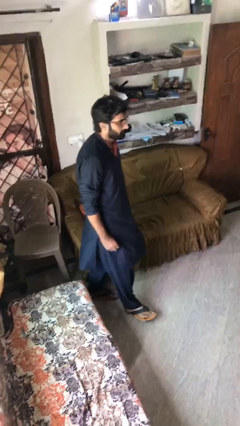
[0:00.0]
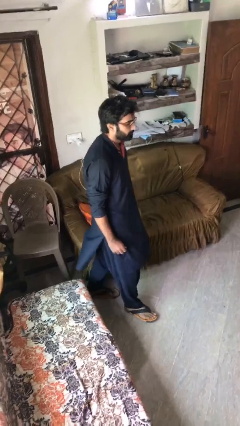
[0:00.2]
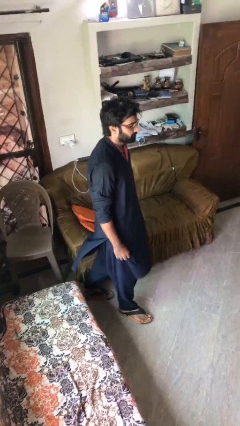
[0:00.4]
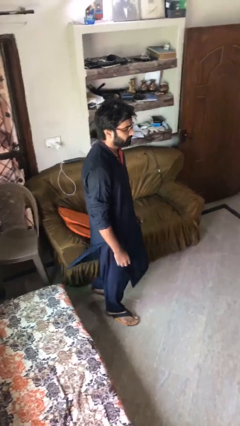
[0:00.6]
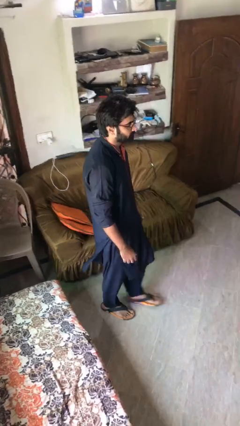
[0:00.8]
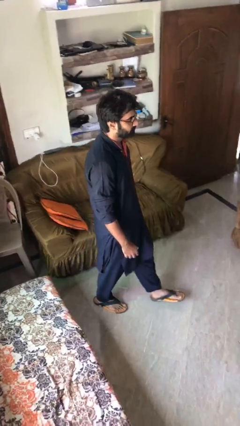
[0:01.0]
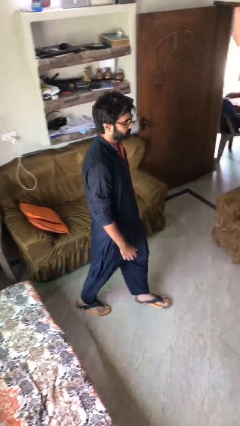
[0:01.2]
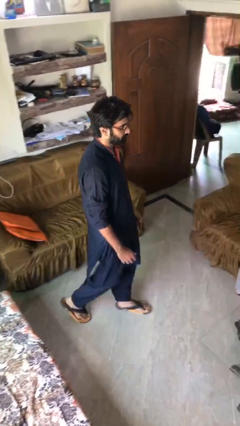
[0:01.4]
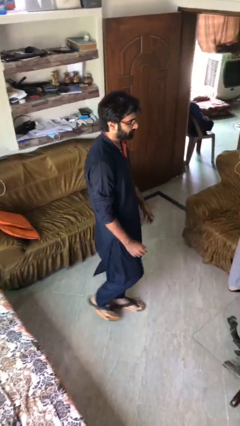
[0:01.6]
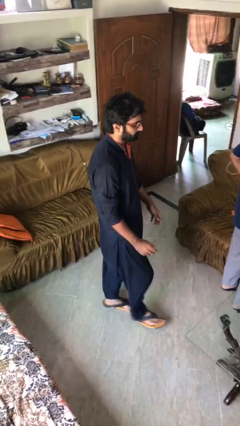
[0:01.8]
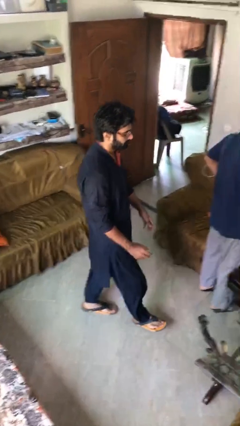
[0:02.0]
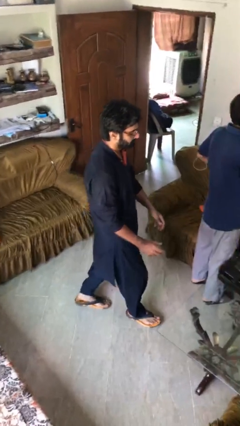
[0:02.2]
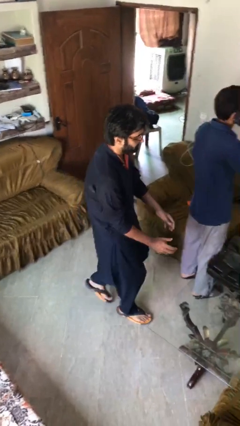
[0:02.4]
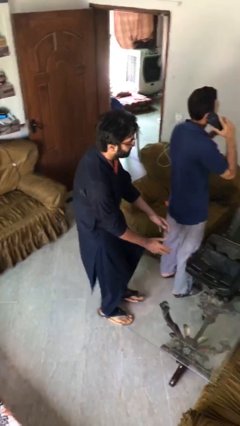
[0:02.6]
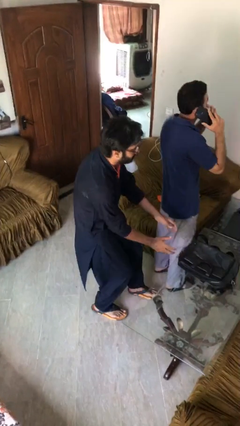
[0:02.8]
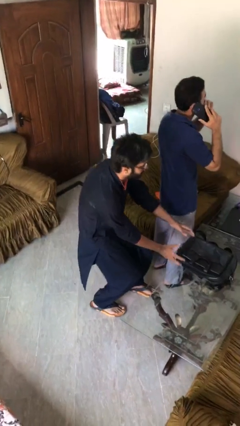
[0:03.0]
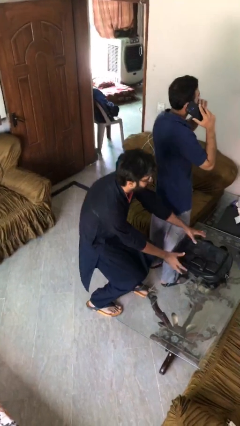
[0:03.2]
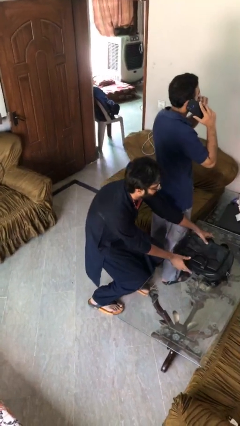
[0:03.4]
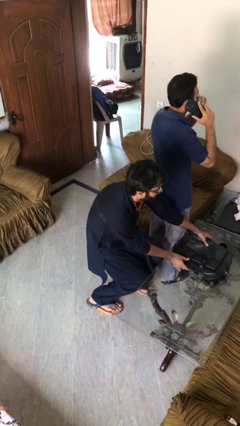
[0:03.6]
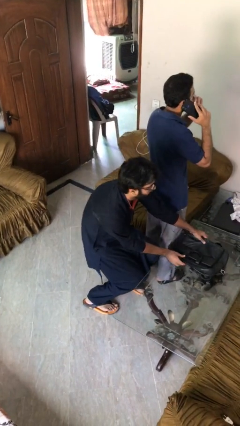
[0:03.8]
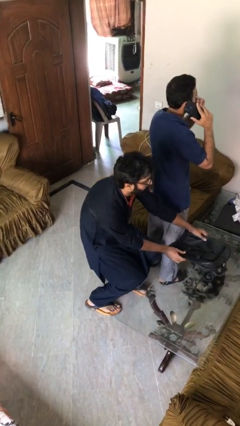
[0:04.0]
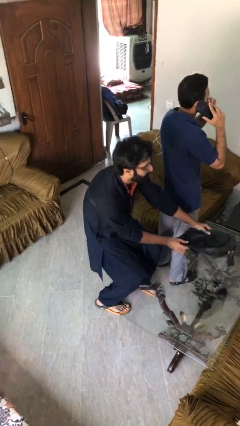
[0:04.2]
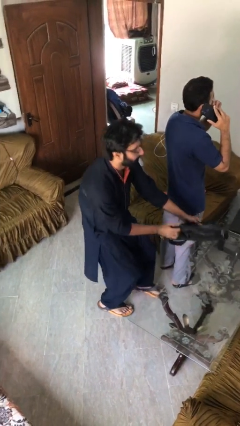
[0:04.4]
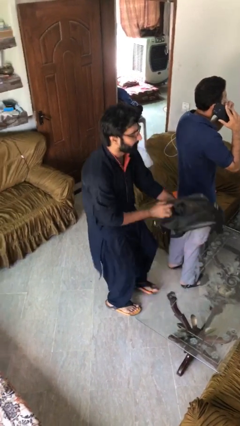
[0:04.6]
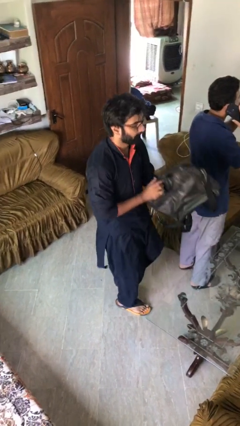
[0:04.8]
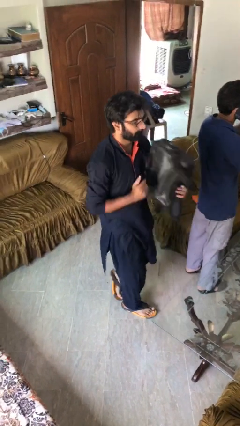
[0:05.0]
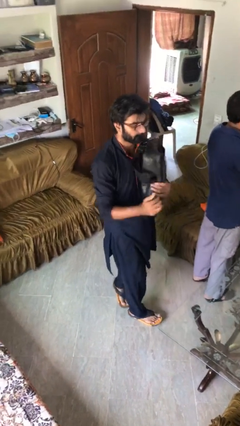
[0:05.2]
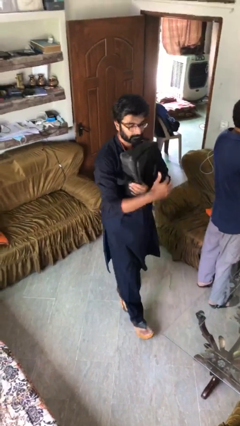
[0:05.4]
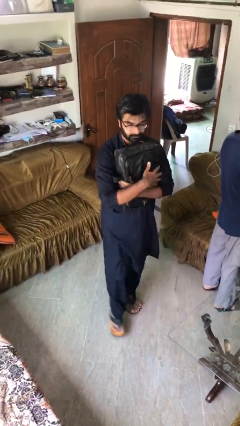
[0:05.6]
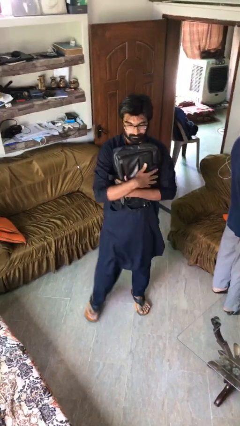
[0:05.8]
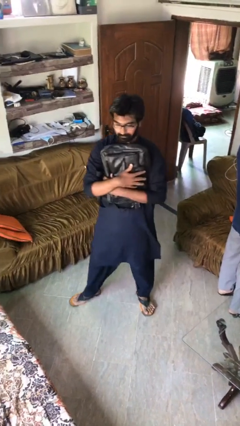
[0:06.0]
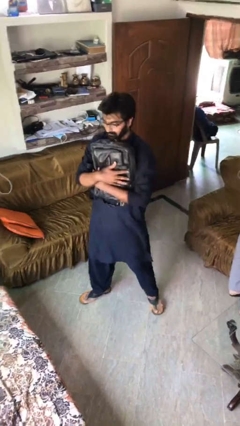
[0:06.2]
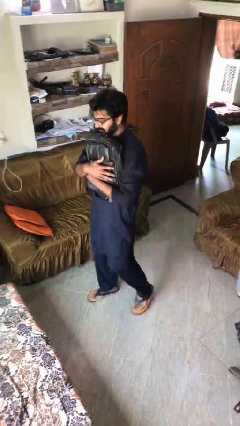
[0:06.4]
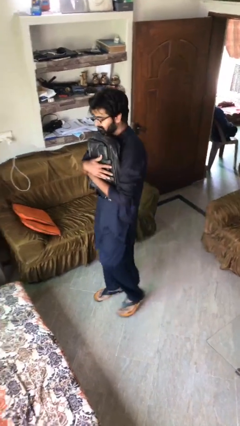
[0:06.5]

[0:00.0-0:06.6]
person steals object from person

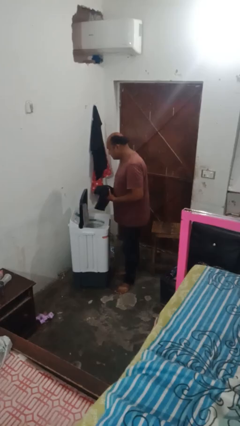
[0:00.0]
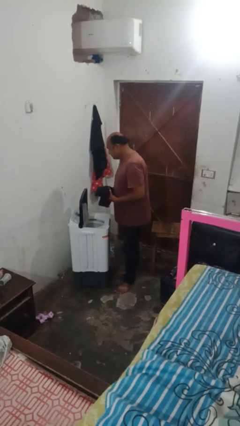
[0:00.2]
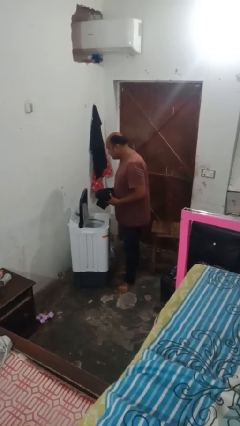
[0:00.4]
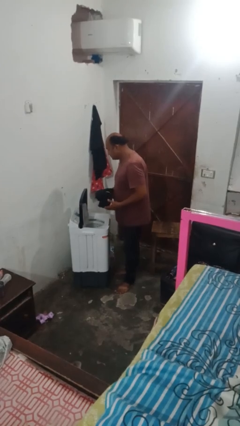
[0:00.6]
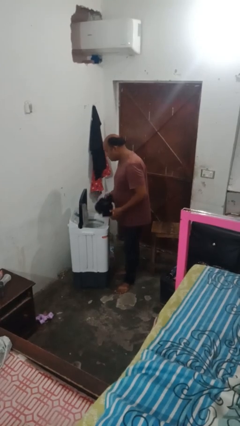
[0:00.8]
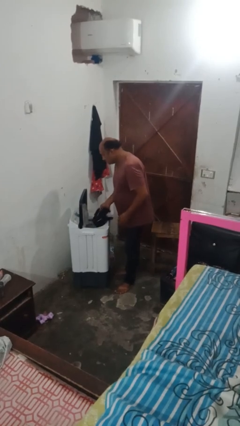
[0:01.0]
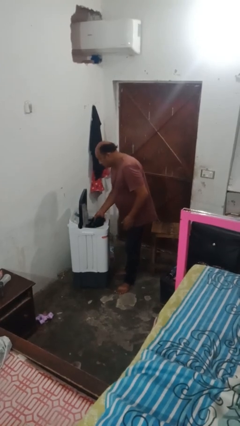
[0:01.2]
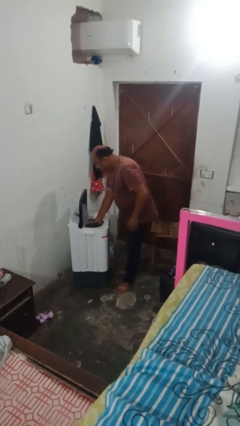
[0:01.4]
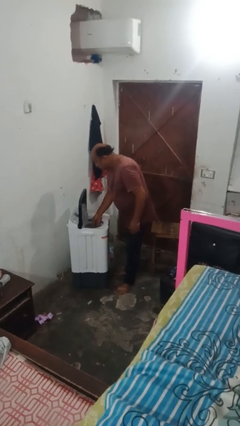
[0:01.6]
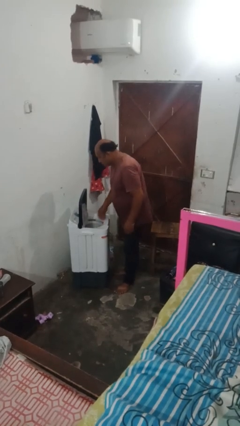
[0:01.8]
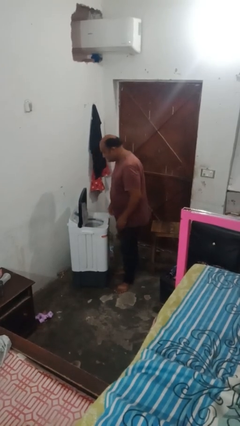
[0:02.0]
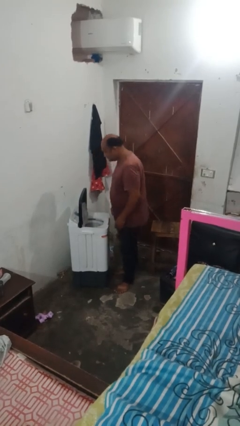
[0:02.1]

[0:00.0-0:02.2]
person loads clotheswasher

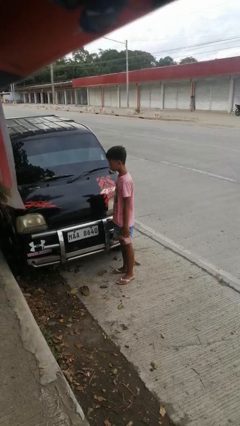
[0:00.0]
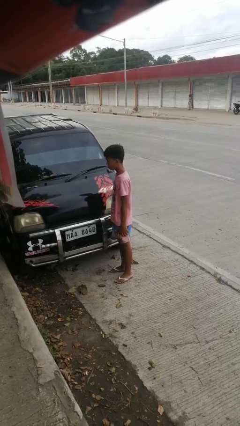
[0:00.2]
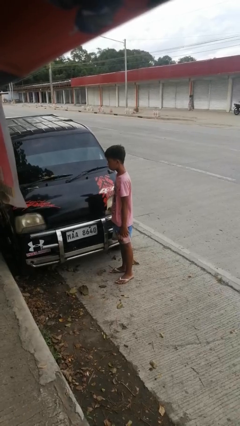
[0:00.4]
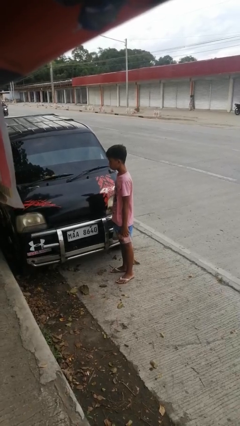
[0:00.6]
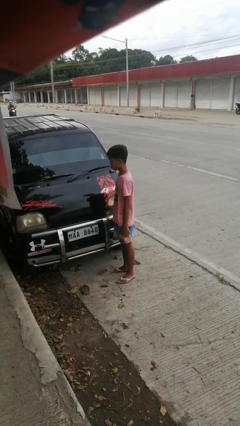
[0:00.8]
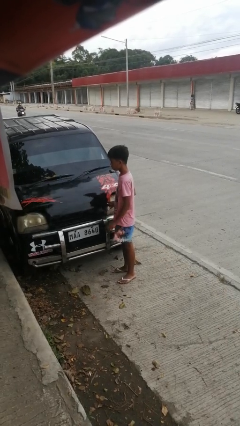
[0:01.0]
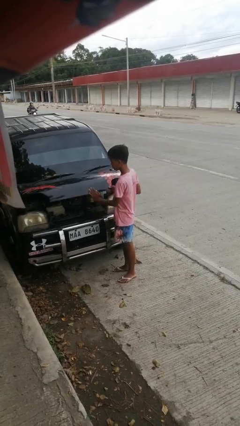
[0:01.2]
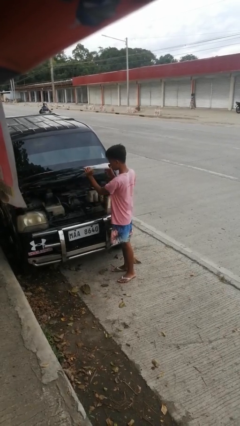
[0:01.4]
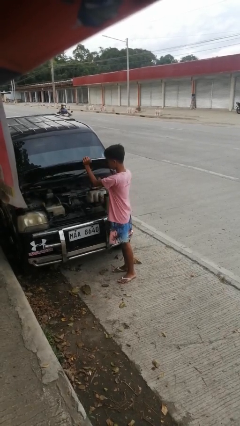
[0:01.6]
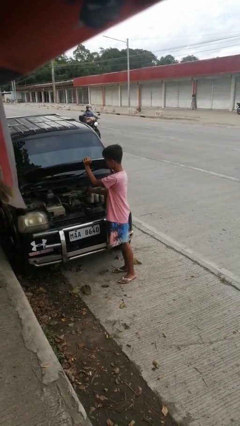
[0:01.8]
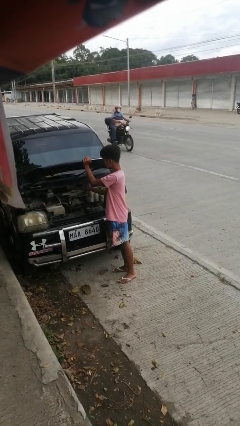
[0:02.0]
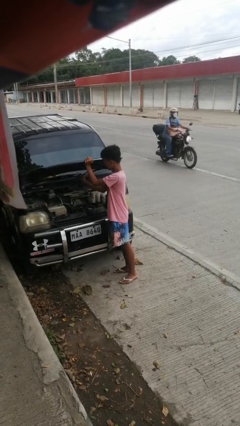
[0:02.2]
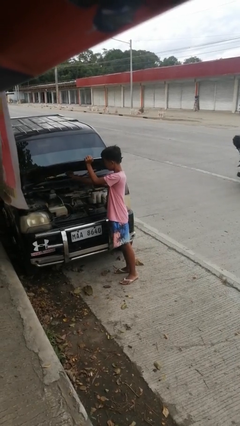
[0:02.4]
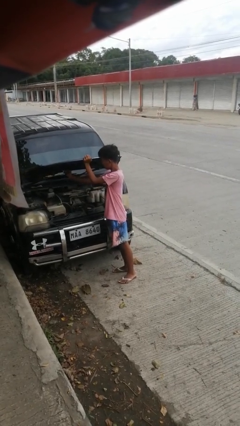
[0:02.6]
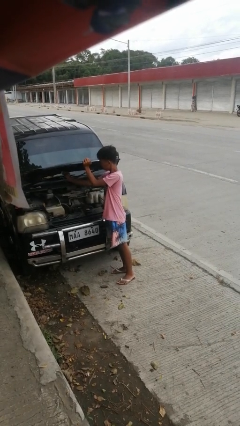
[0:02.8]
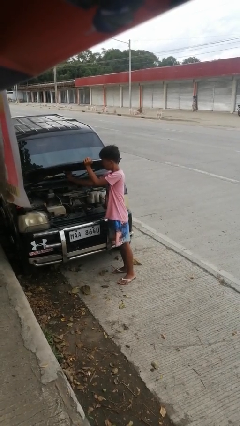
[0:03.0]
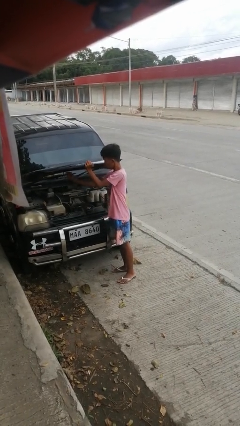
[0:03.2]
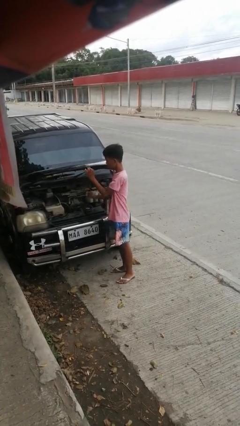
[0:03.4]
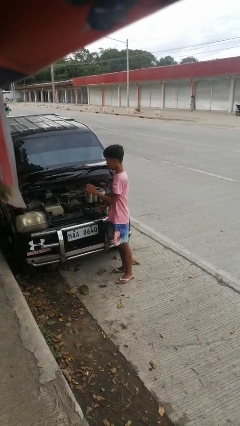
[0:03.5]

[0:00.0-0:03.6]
person opens car hood

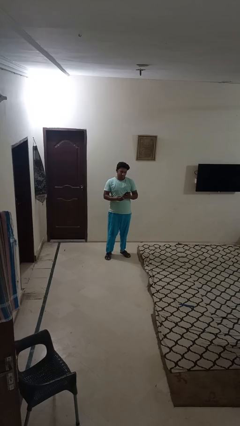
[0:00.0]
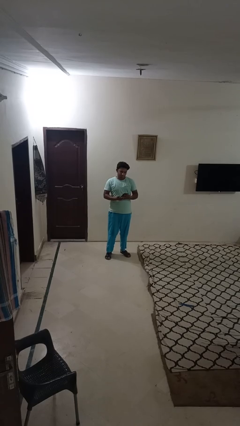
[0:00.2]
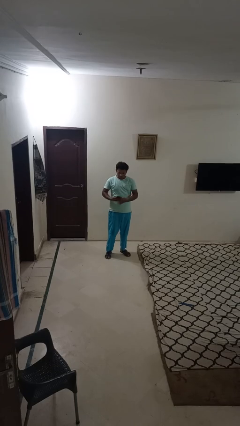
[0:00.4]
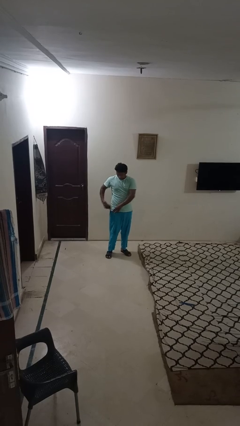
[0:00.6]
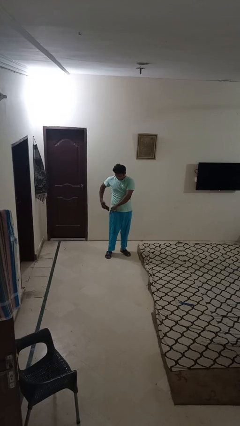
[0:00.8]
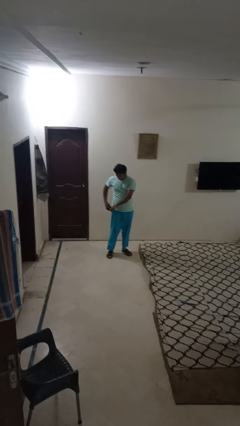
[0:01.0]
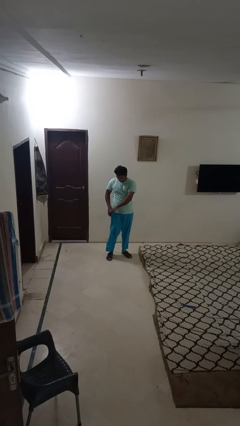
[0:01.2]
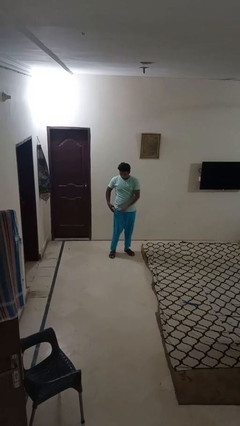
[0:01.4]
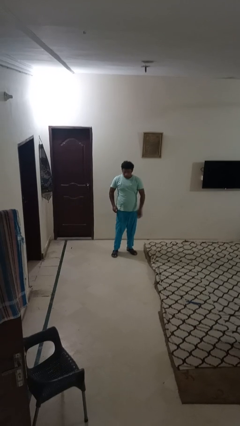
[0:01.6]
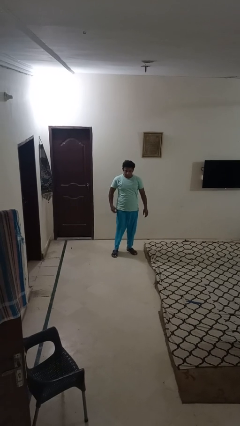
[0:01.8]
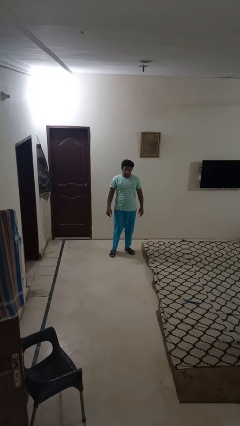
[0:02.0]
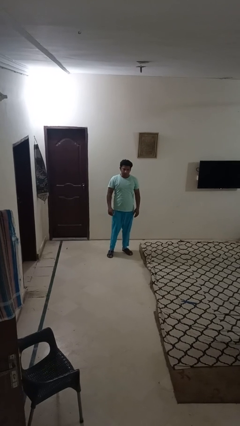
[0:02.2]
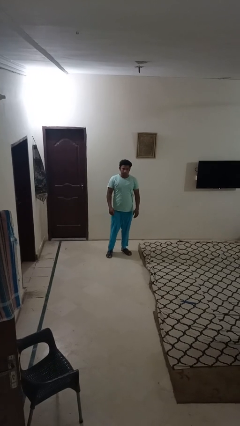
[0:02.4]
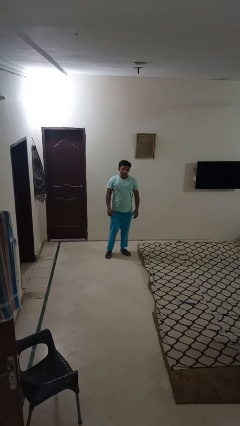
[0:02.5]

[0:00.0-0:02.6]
person puts phone into pocket

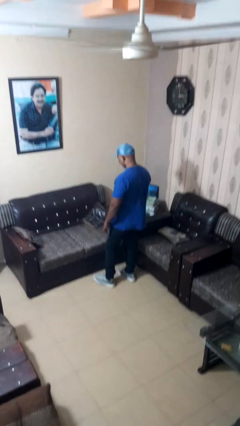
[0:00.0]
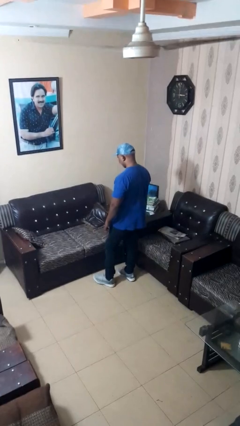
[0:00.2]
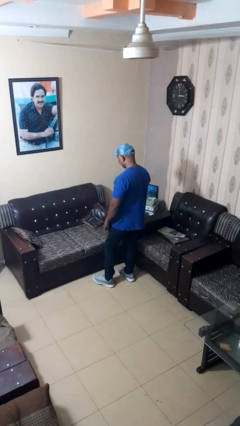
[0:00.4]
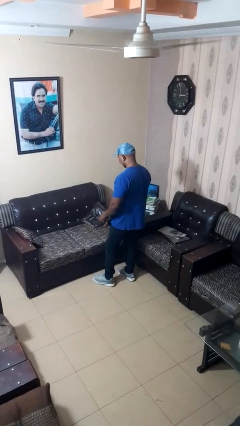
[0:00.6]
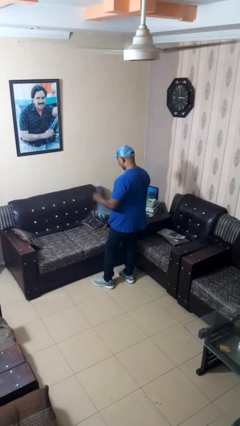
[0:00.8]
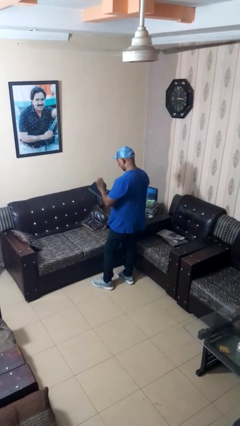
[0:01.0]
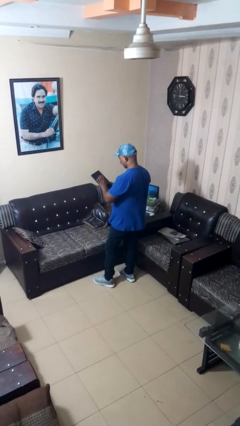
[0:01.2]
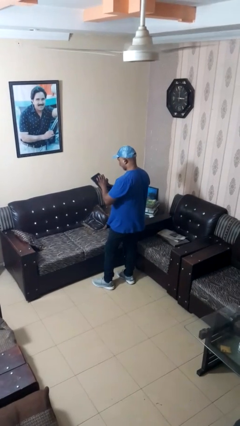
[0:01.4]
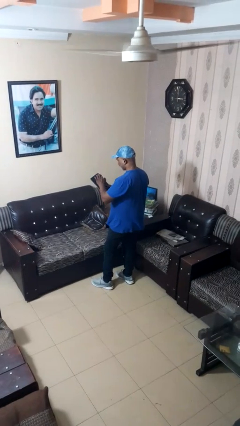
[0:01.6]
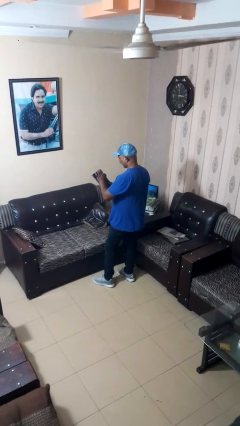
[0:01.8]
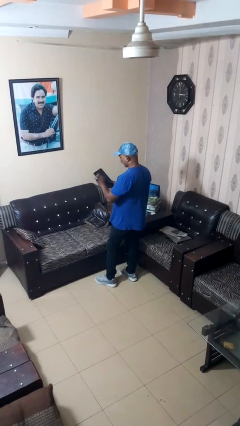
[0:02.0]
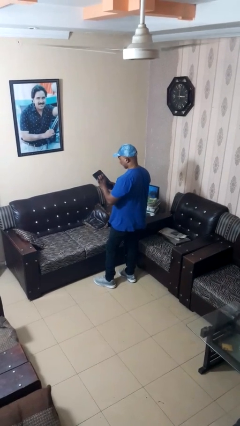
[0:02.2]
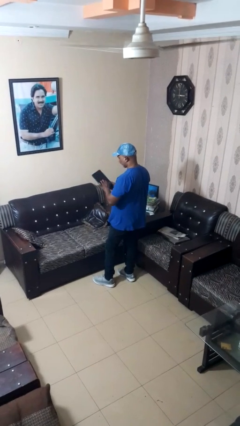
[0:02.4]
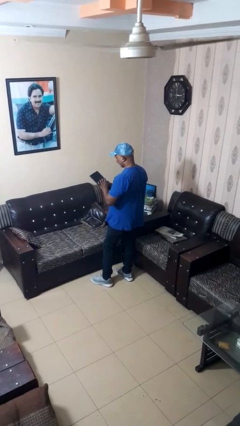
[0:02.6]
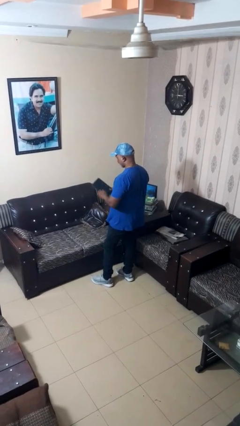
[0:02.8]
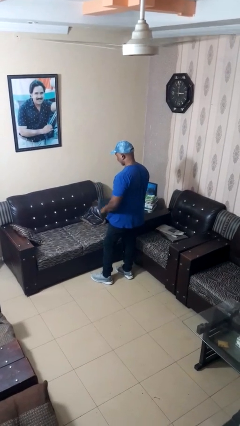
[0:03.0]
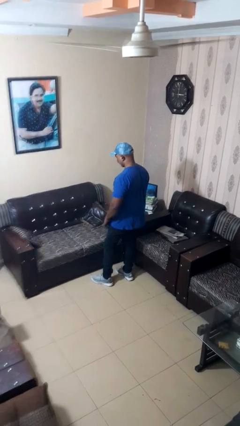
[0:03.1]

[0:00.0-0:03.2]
person taps object with finger
